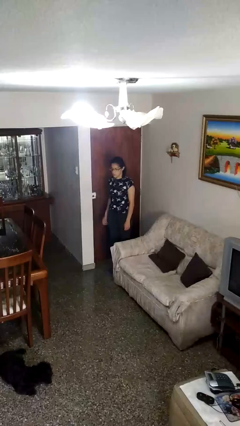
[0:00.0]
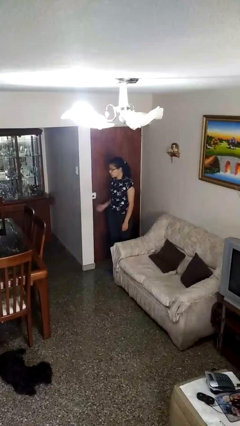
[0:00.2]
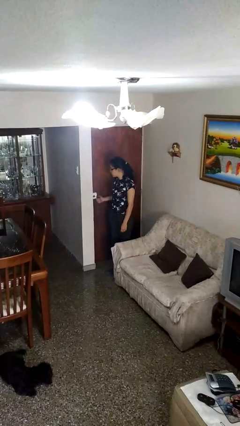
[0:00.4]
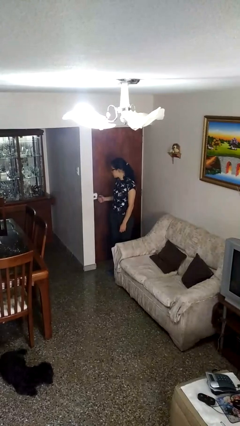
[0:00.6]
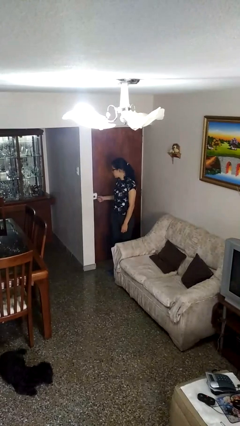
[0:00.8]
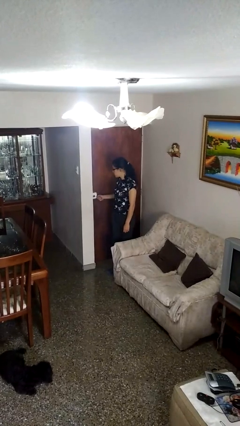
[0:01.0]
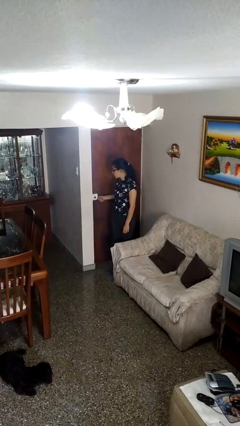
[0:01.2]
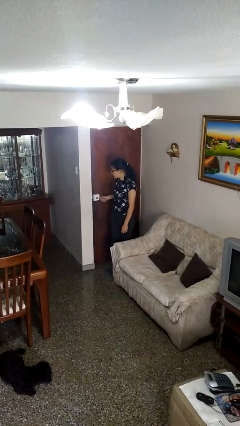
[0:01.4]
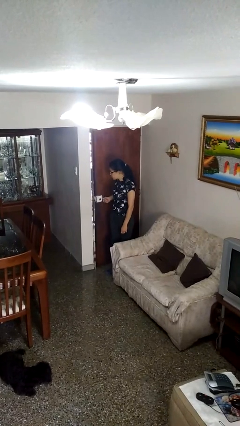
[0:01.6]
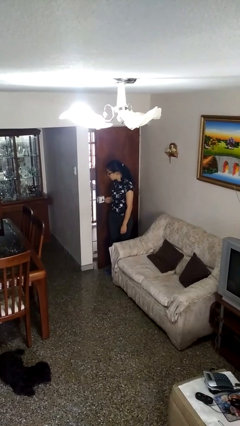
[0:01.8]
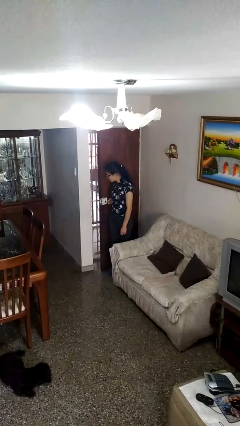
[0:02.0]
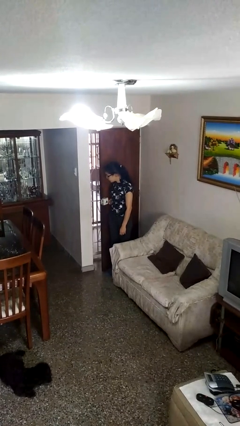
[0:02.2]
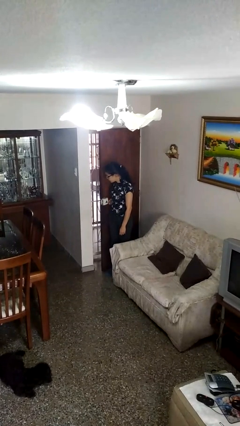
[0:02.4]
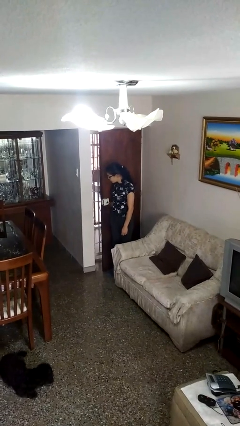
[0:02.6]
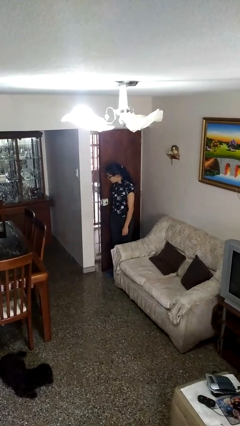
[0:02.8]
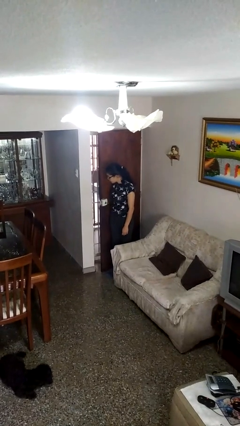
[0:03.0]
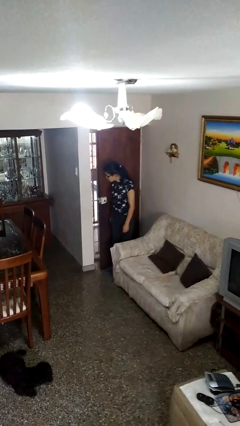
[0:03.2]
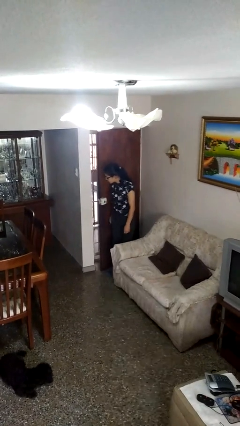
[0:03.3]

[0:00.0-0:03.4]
person opens facility door

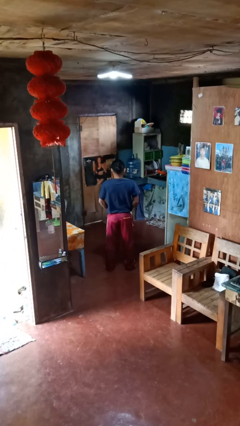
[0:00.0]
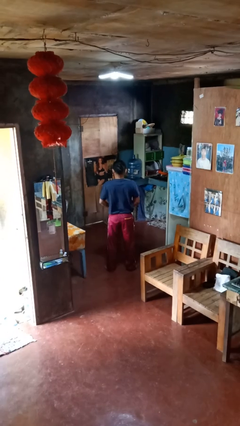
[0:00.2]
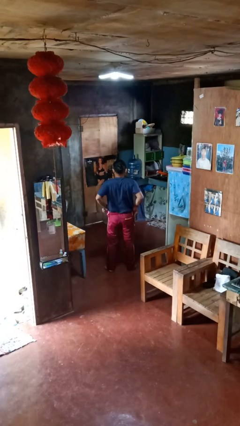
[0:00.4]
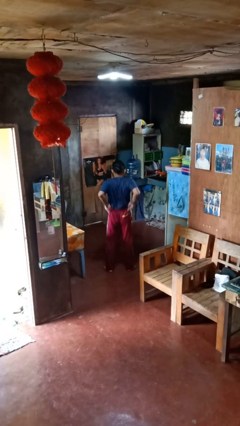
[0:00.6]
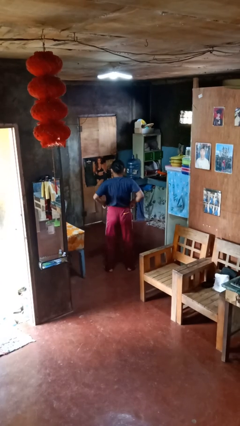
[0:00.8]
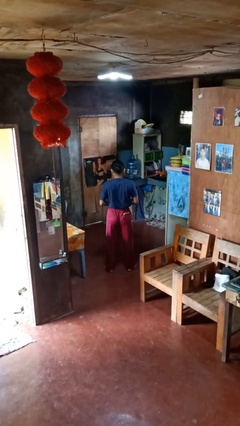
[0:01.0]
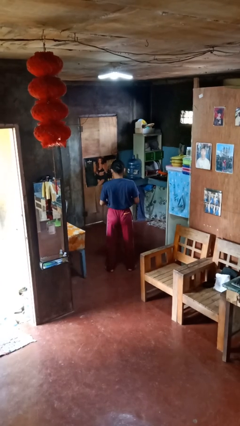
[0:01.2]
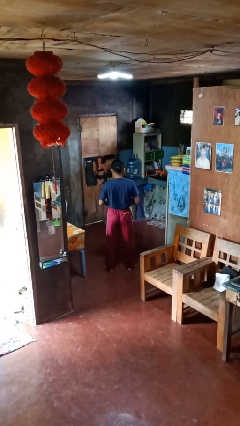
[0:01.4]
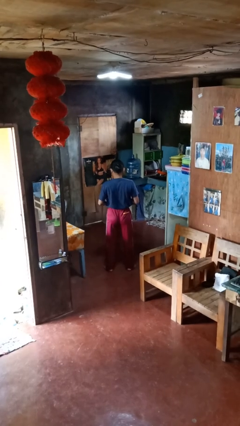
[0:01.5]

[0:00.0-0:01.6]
person hikes up pants

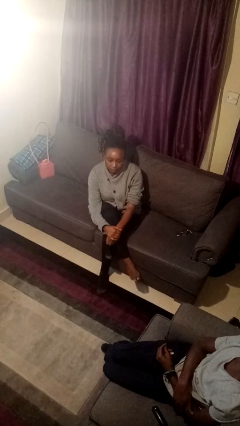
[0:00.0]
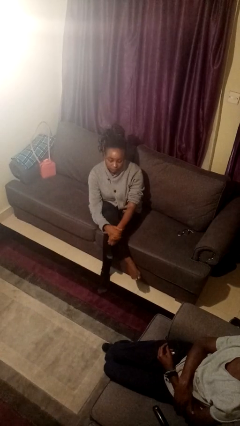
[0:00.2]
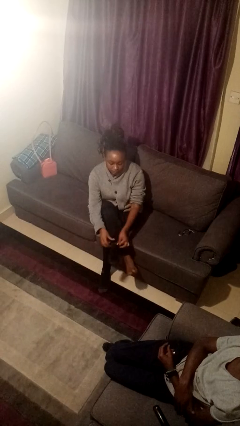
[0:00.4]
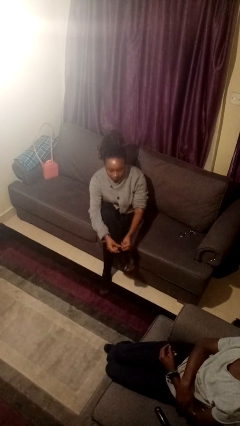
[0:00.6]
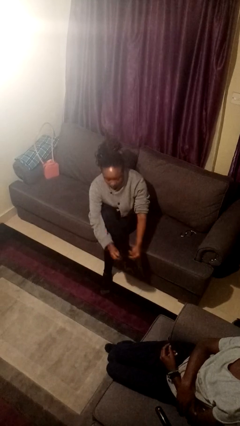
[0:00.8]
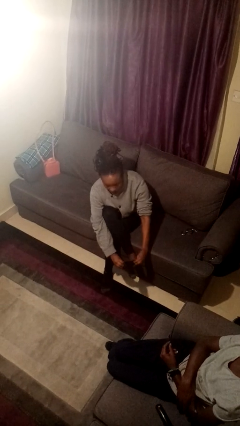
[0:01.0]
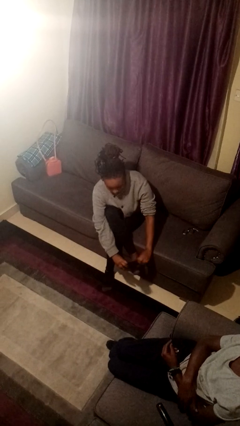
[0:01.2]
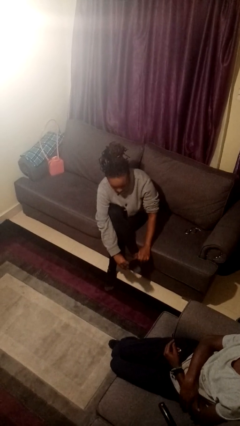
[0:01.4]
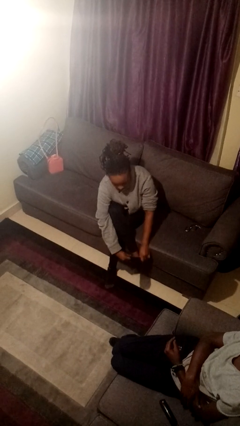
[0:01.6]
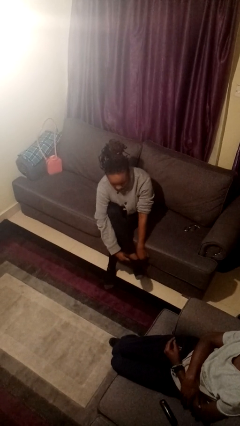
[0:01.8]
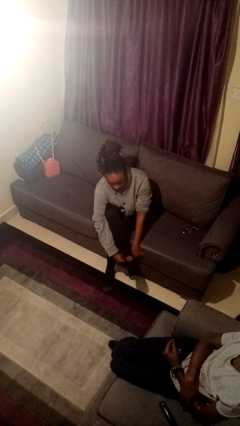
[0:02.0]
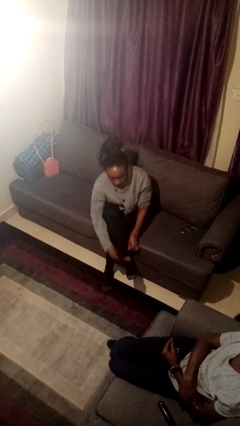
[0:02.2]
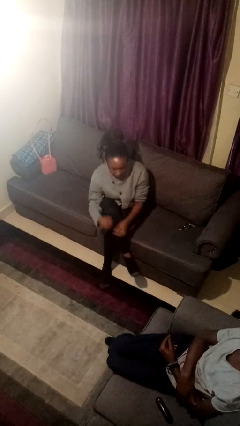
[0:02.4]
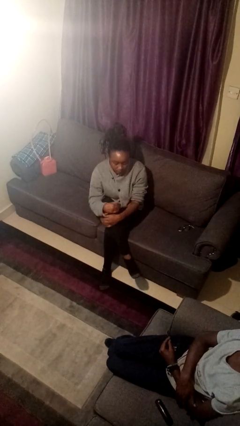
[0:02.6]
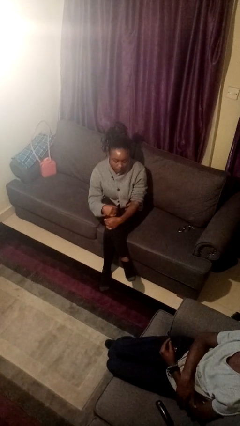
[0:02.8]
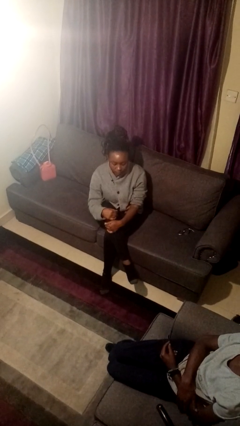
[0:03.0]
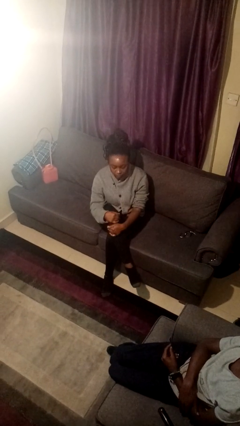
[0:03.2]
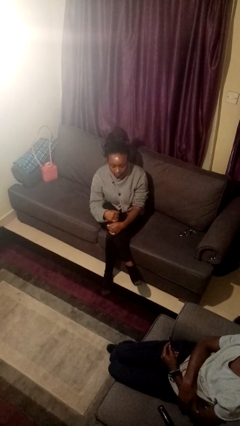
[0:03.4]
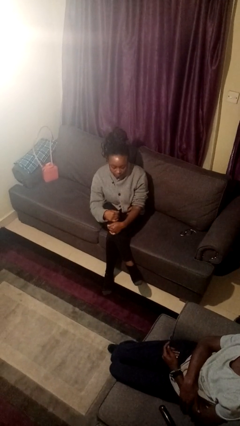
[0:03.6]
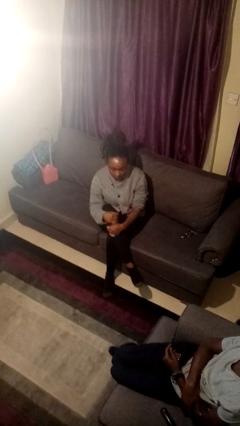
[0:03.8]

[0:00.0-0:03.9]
person puts on socks

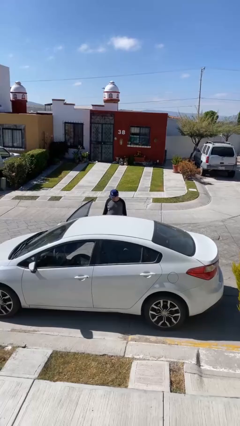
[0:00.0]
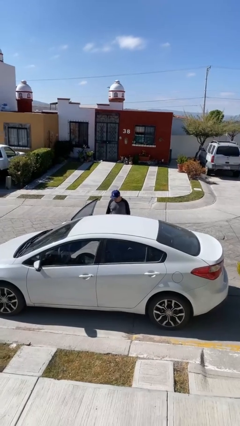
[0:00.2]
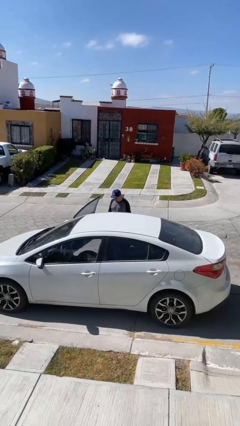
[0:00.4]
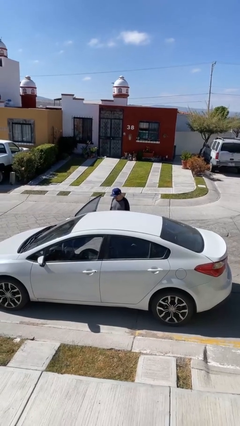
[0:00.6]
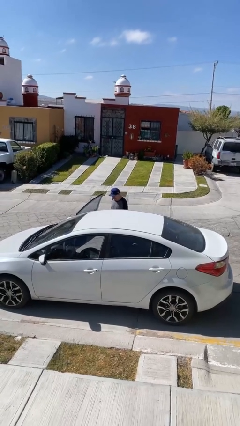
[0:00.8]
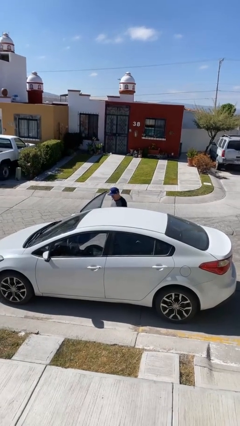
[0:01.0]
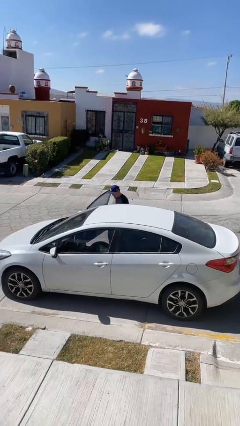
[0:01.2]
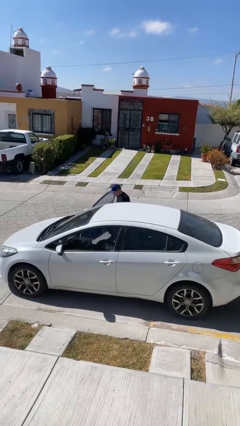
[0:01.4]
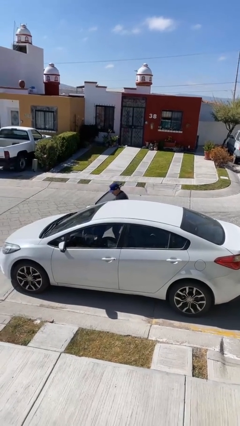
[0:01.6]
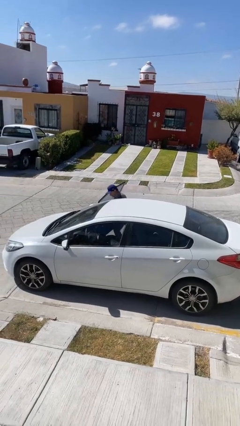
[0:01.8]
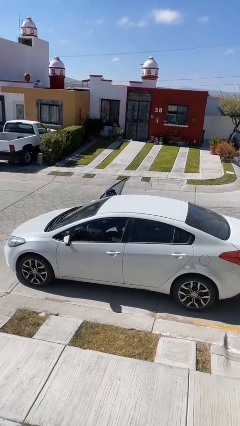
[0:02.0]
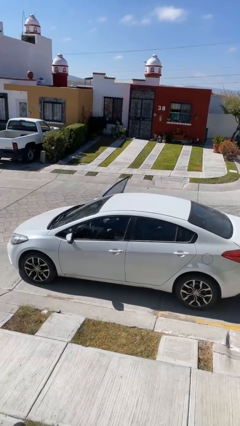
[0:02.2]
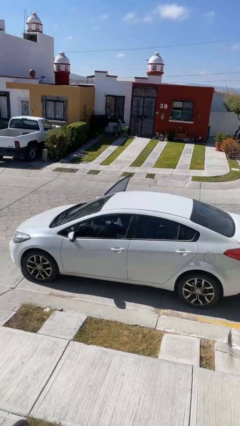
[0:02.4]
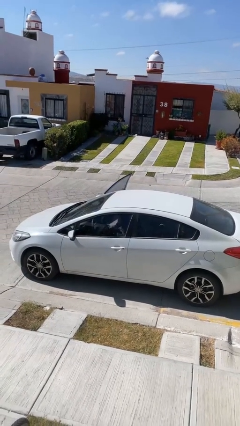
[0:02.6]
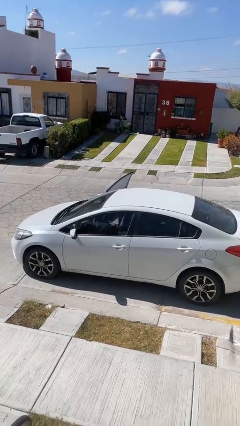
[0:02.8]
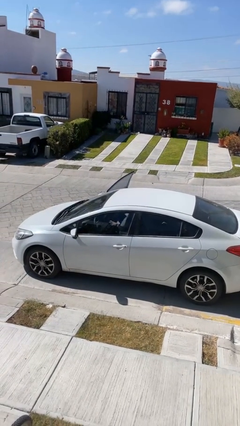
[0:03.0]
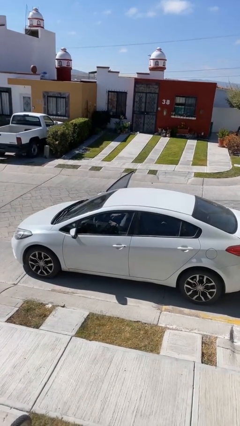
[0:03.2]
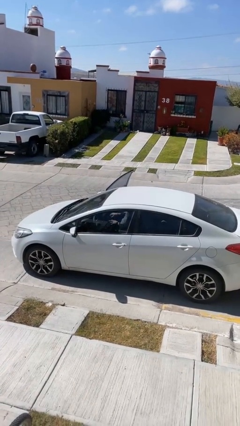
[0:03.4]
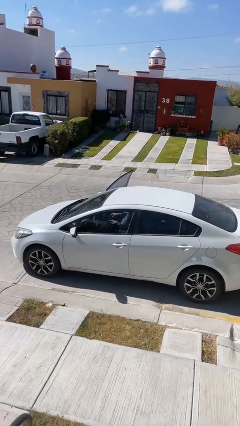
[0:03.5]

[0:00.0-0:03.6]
person enters car

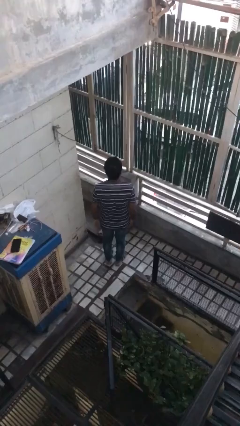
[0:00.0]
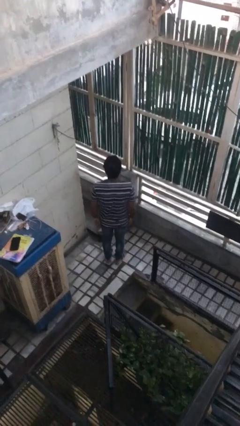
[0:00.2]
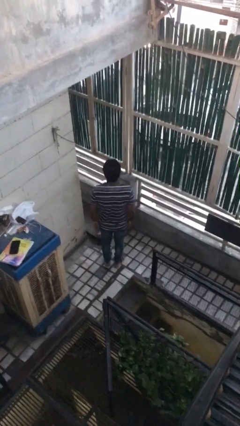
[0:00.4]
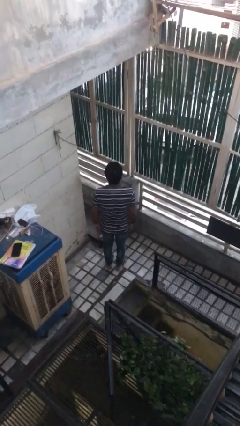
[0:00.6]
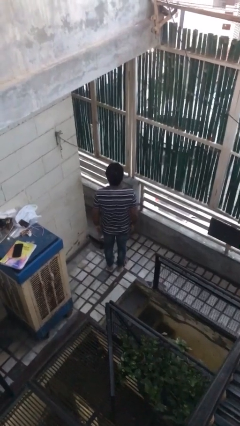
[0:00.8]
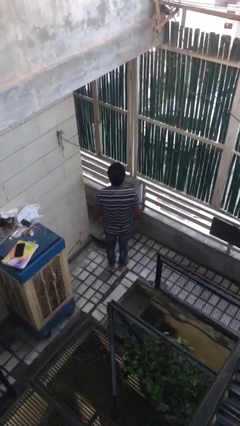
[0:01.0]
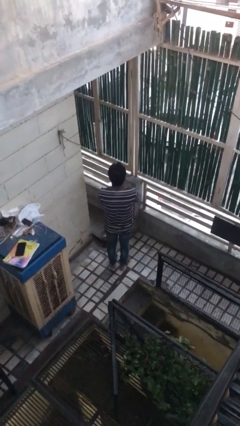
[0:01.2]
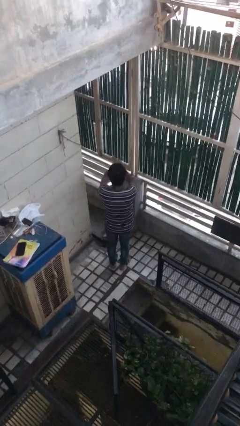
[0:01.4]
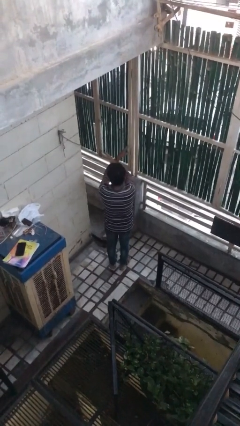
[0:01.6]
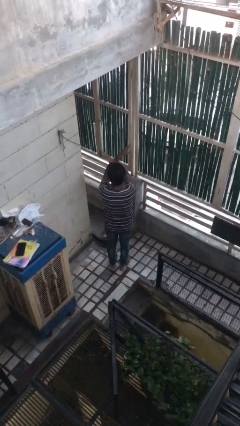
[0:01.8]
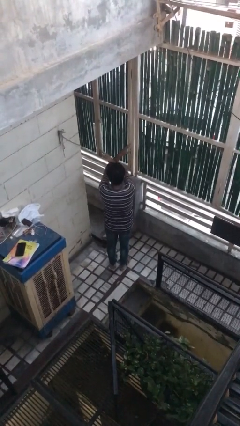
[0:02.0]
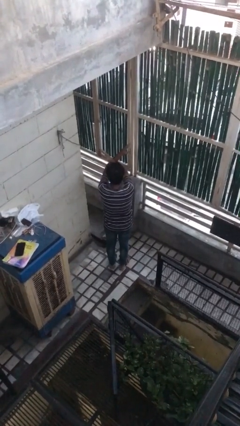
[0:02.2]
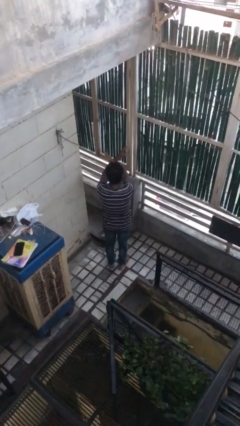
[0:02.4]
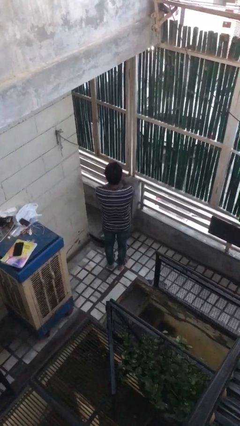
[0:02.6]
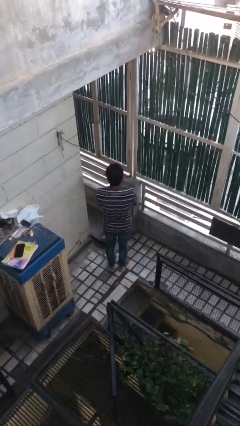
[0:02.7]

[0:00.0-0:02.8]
person gestures arms x

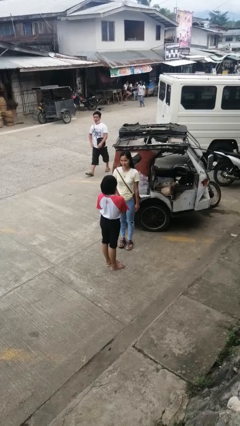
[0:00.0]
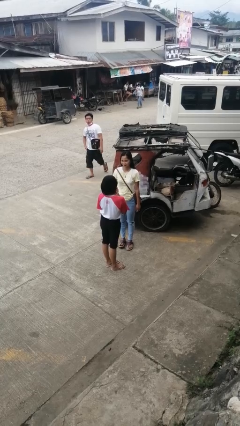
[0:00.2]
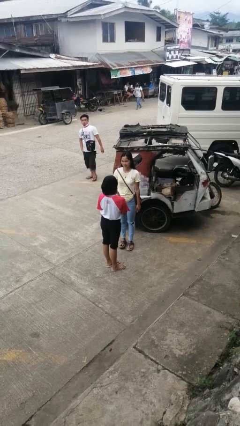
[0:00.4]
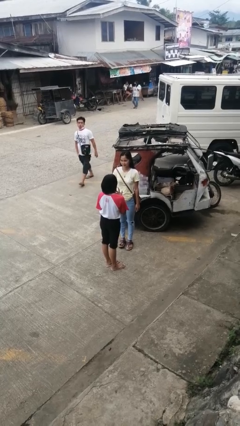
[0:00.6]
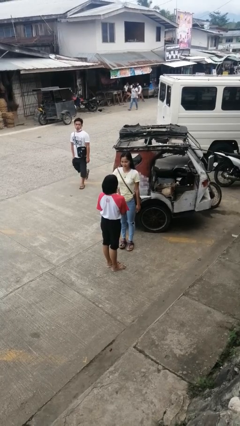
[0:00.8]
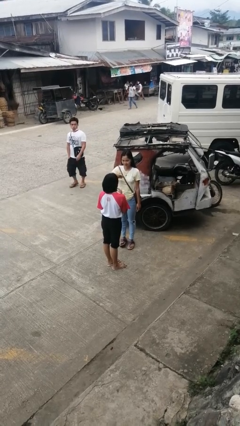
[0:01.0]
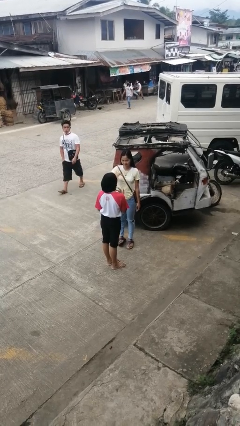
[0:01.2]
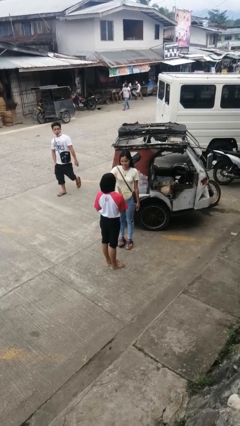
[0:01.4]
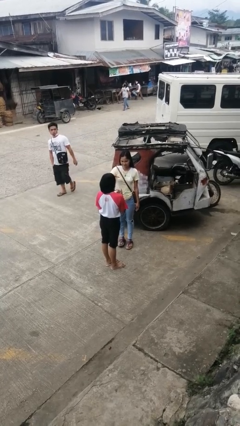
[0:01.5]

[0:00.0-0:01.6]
person shoves person

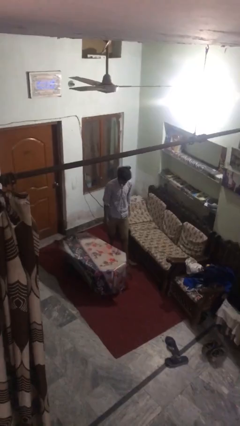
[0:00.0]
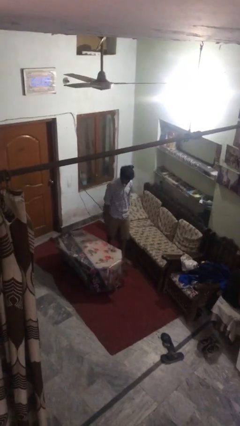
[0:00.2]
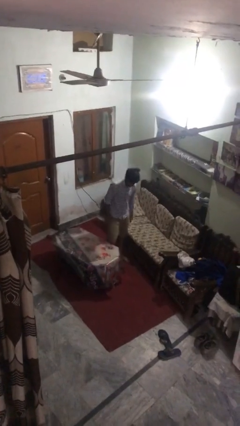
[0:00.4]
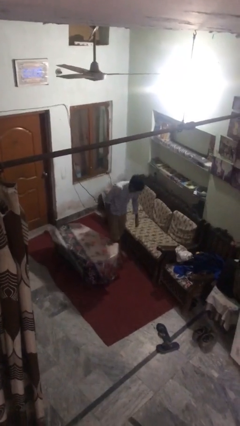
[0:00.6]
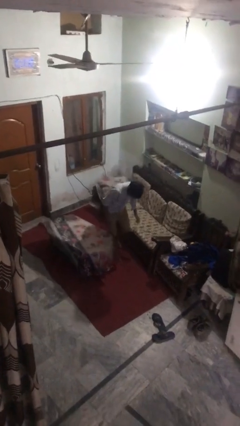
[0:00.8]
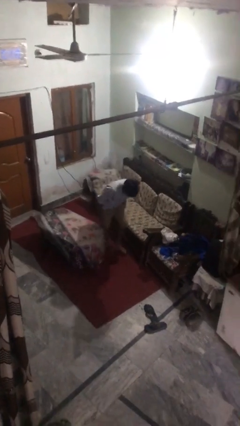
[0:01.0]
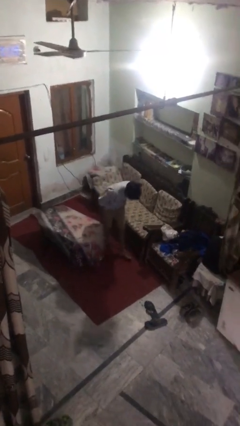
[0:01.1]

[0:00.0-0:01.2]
person trips on object on floor
